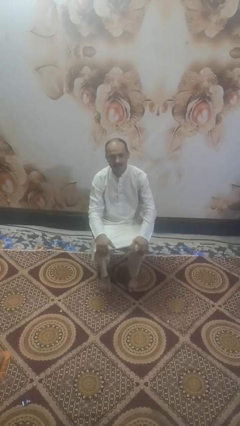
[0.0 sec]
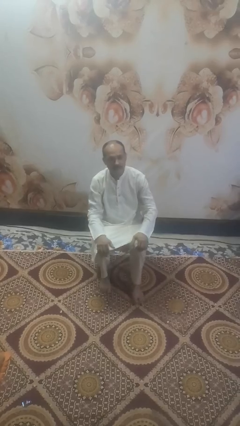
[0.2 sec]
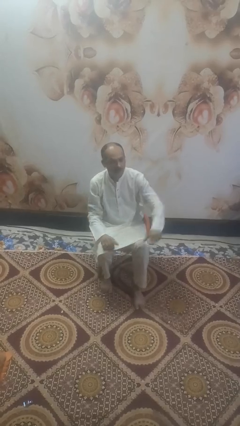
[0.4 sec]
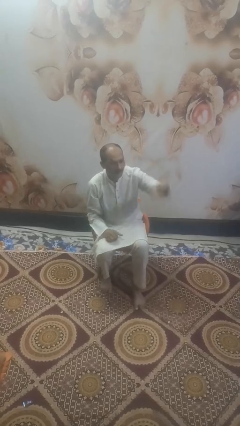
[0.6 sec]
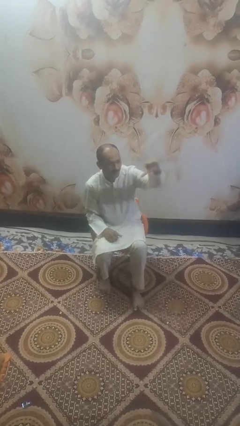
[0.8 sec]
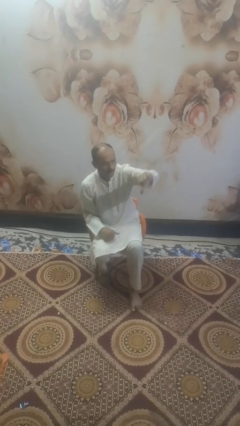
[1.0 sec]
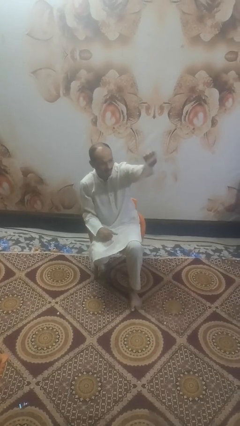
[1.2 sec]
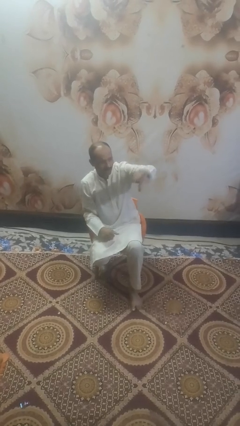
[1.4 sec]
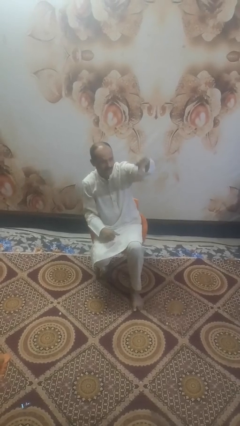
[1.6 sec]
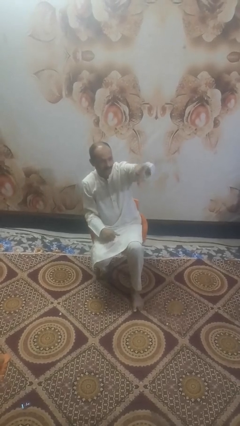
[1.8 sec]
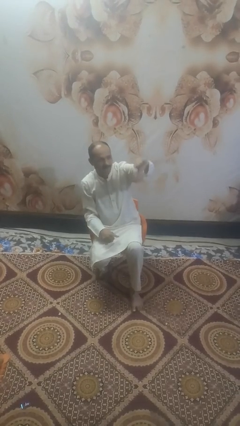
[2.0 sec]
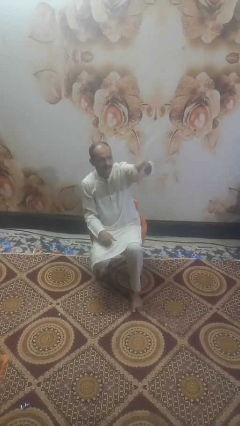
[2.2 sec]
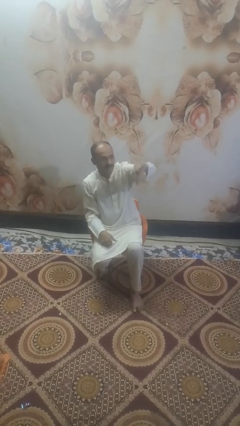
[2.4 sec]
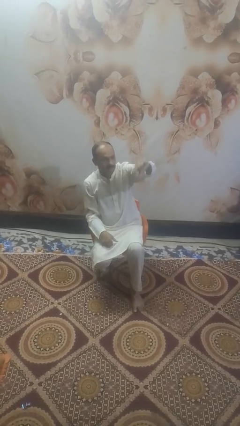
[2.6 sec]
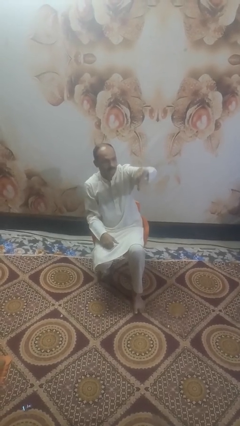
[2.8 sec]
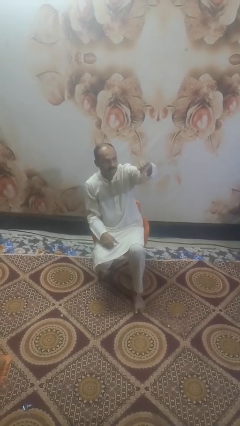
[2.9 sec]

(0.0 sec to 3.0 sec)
person gestures thumbs down

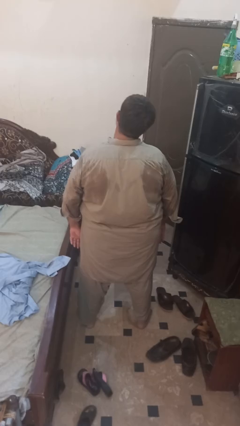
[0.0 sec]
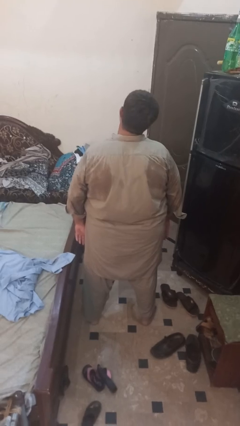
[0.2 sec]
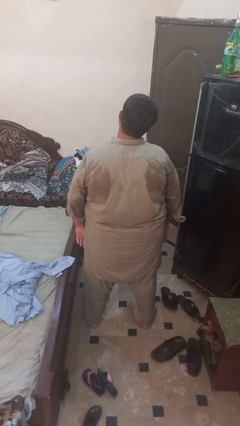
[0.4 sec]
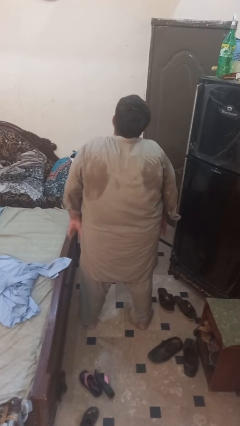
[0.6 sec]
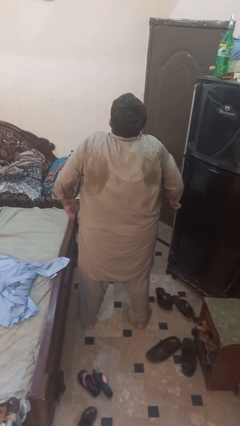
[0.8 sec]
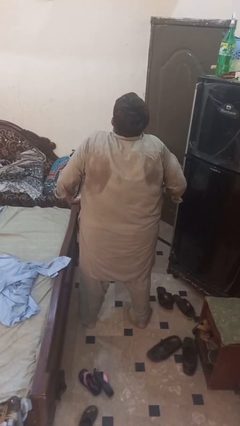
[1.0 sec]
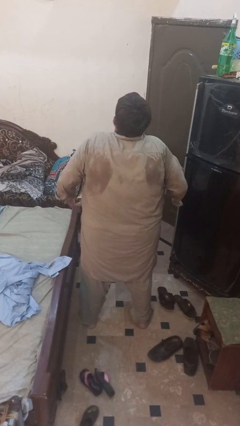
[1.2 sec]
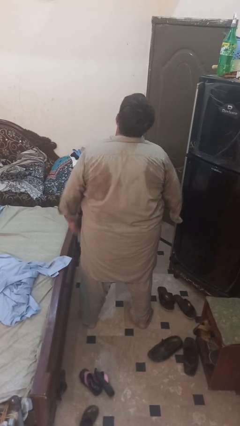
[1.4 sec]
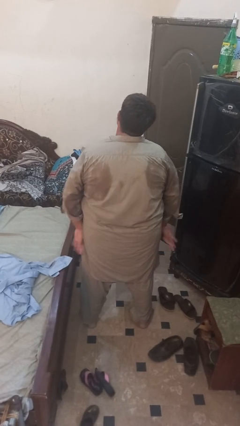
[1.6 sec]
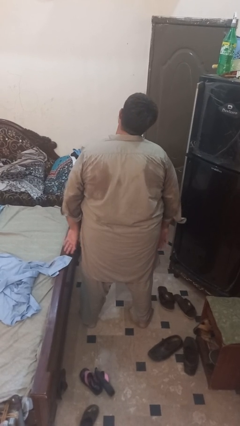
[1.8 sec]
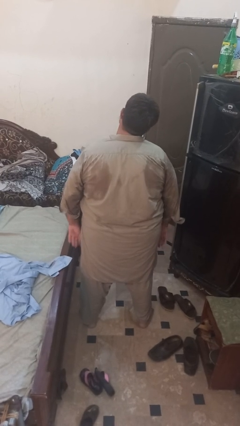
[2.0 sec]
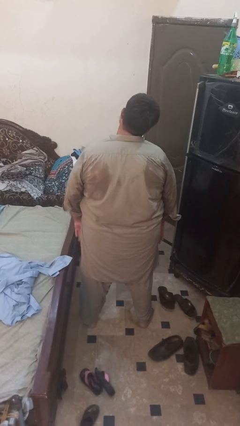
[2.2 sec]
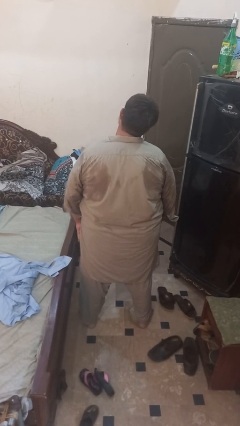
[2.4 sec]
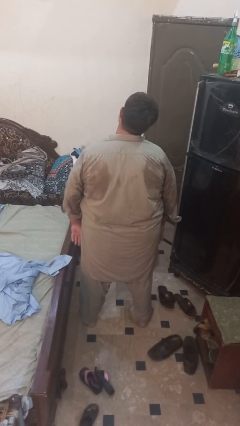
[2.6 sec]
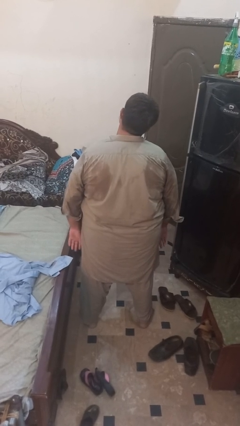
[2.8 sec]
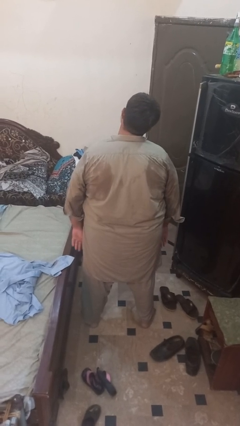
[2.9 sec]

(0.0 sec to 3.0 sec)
person shrugs

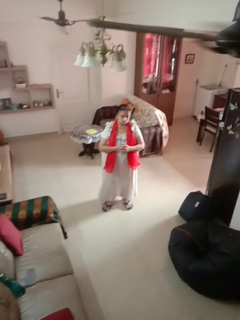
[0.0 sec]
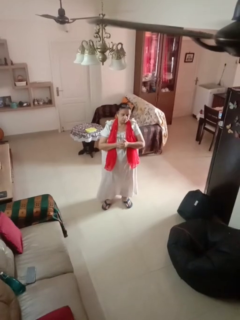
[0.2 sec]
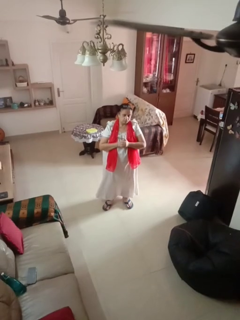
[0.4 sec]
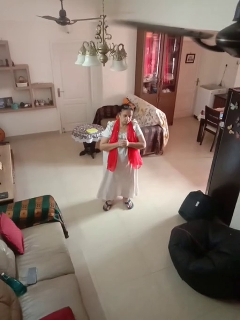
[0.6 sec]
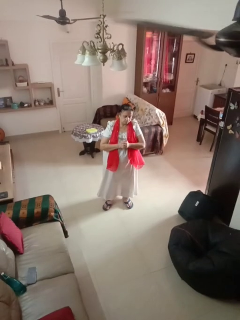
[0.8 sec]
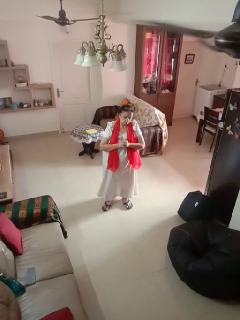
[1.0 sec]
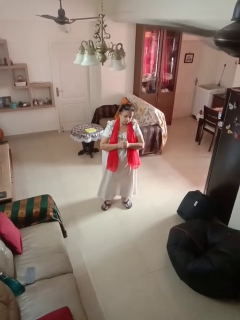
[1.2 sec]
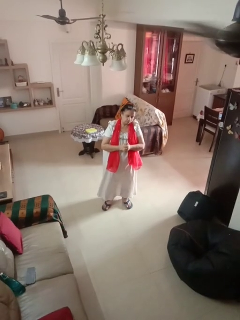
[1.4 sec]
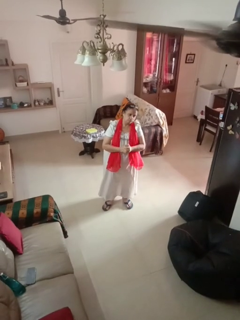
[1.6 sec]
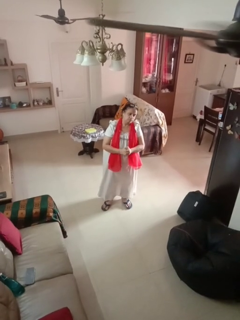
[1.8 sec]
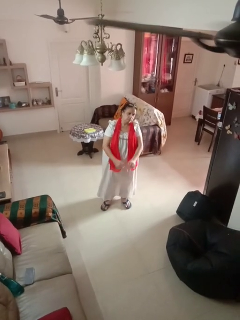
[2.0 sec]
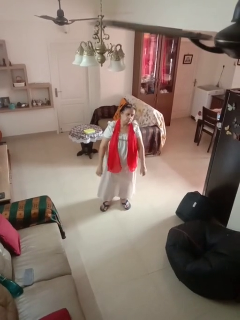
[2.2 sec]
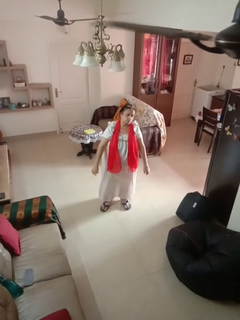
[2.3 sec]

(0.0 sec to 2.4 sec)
person cracks knuckles

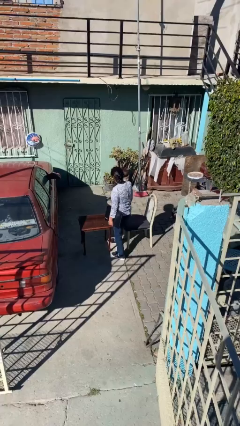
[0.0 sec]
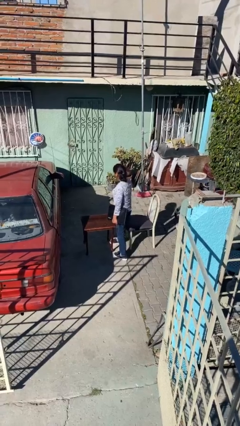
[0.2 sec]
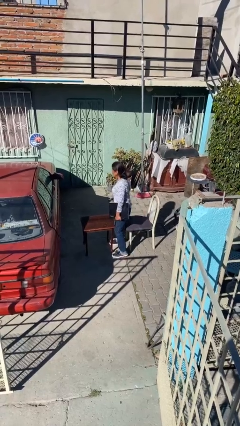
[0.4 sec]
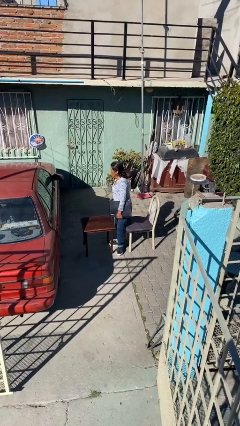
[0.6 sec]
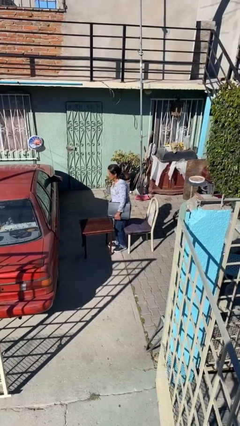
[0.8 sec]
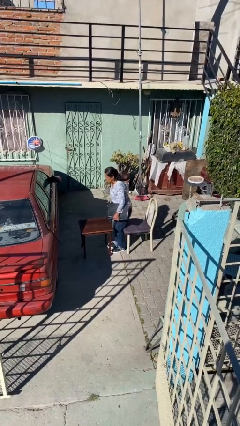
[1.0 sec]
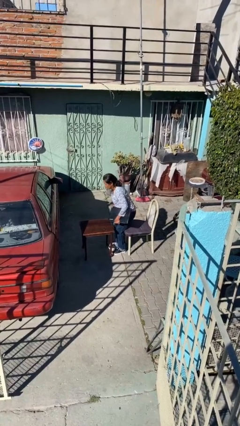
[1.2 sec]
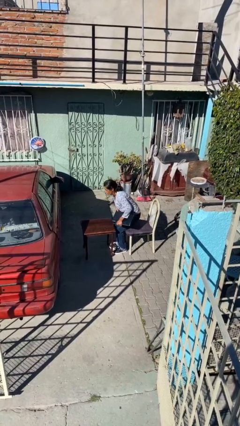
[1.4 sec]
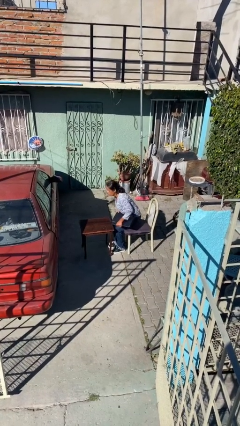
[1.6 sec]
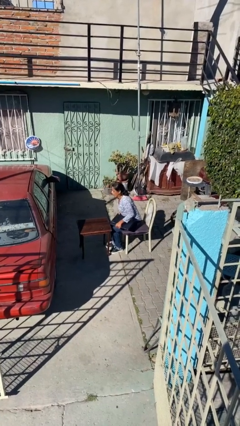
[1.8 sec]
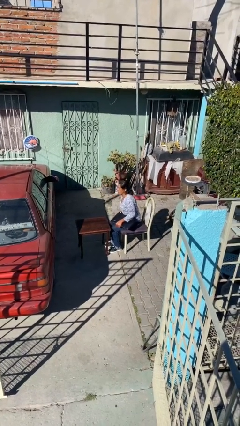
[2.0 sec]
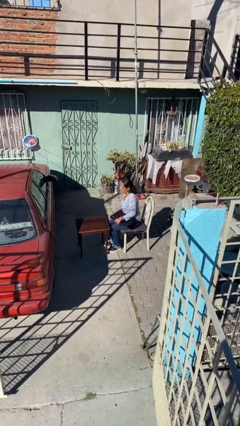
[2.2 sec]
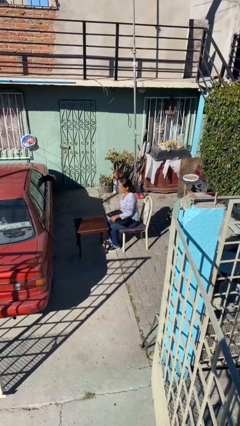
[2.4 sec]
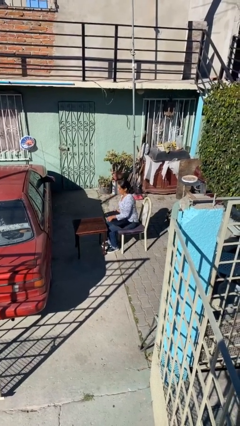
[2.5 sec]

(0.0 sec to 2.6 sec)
person sits down

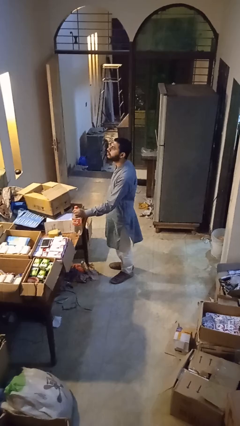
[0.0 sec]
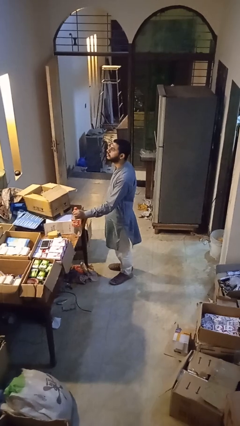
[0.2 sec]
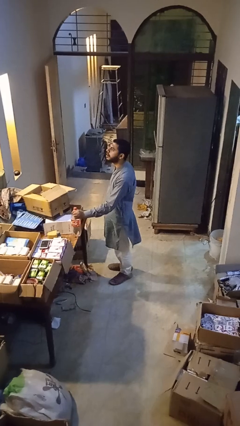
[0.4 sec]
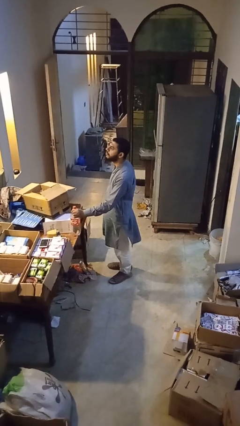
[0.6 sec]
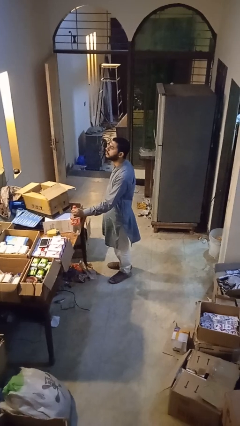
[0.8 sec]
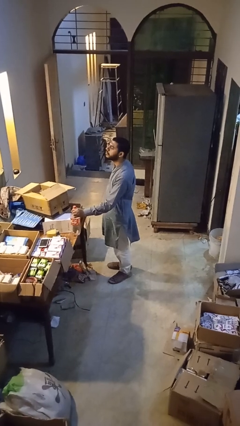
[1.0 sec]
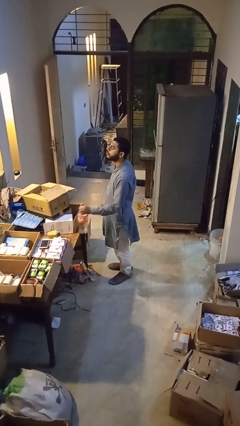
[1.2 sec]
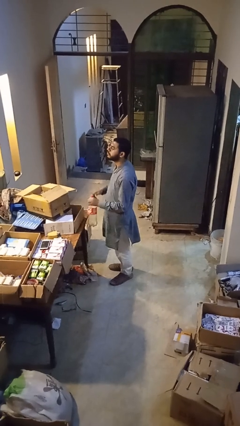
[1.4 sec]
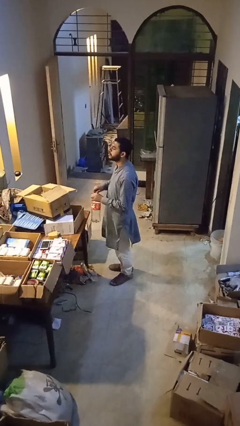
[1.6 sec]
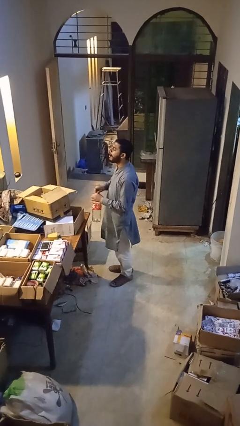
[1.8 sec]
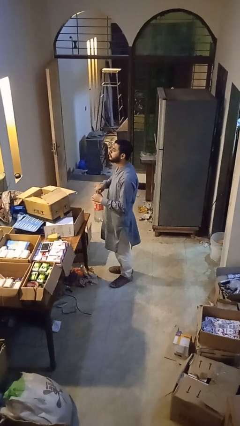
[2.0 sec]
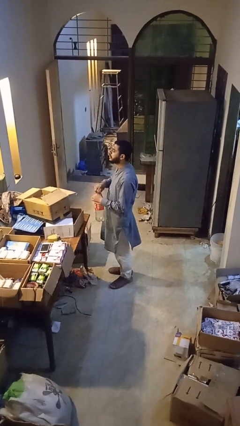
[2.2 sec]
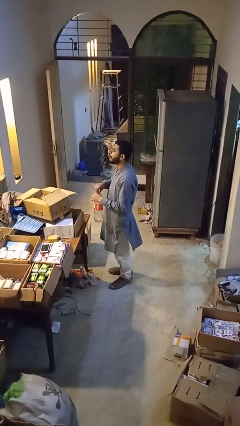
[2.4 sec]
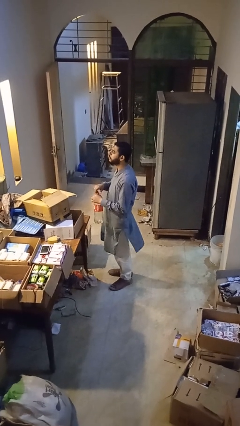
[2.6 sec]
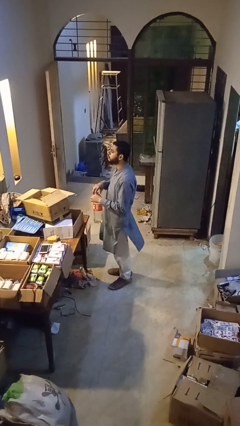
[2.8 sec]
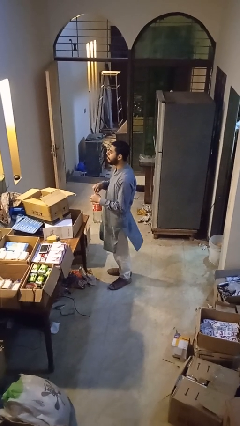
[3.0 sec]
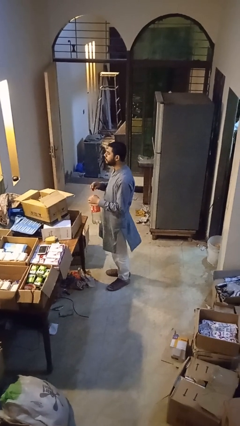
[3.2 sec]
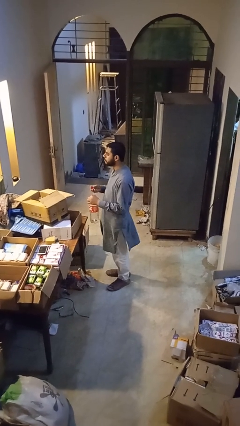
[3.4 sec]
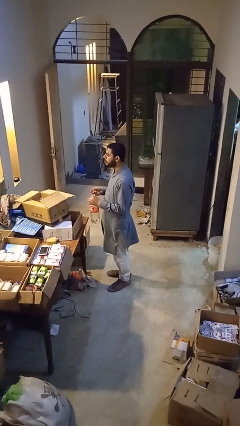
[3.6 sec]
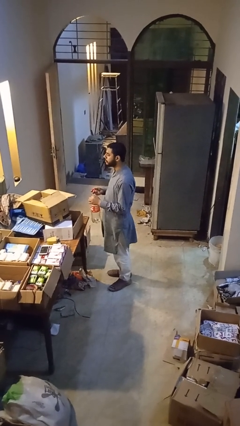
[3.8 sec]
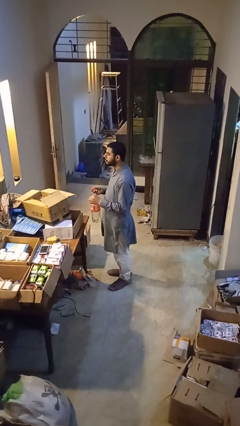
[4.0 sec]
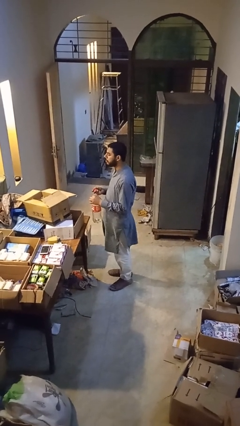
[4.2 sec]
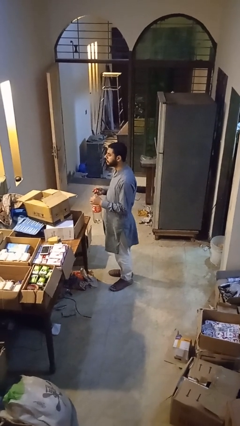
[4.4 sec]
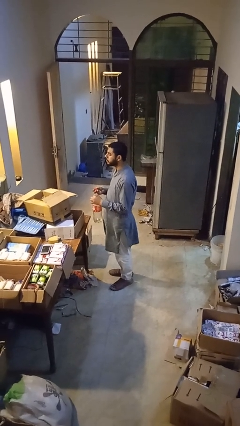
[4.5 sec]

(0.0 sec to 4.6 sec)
person unscrews lid from bottle

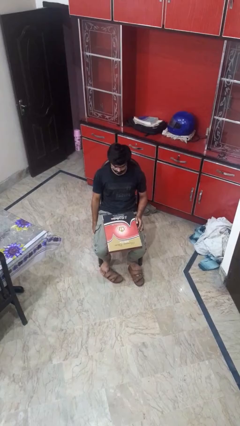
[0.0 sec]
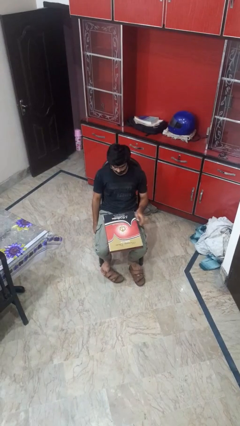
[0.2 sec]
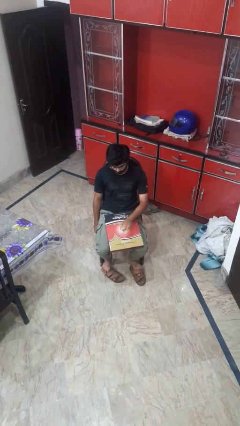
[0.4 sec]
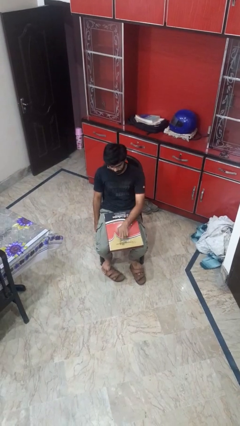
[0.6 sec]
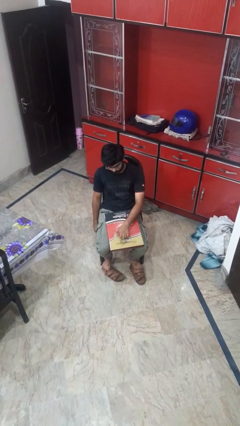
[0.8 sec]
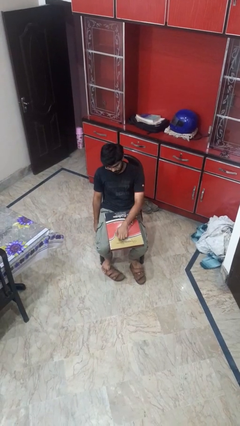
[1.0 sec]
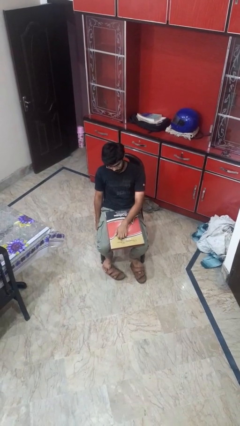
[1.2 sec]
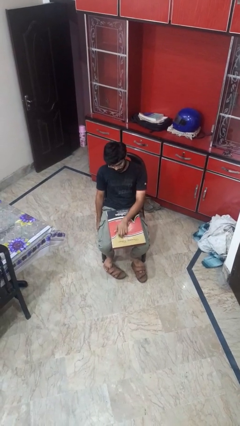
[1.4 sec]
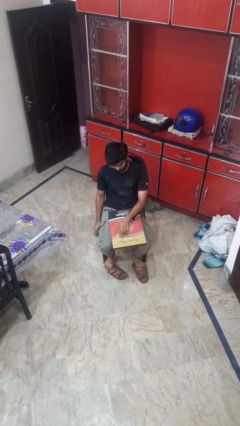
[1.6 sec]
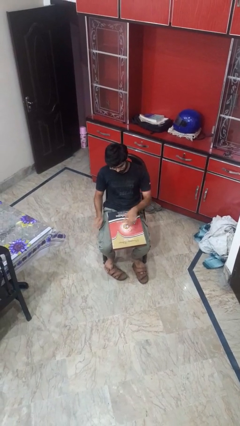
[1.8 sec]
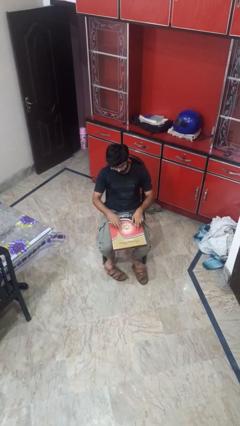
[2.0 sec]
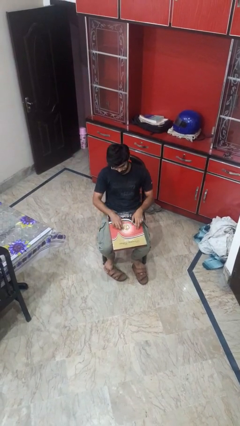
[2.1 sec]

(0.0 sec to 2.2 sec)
person taps object with finger
